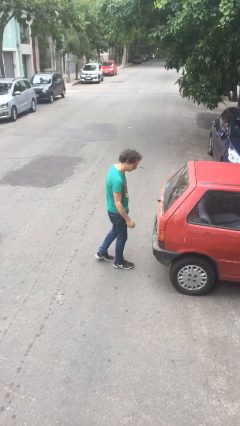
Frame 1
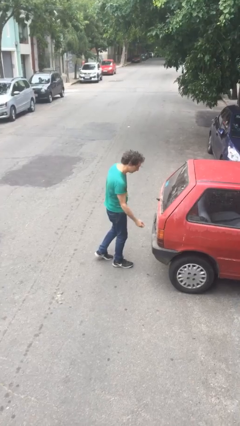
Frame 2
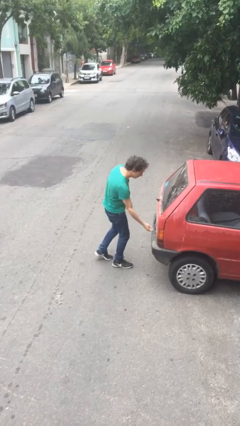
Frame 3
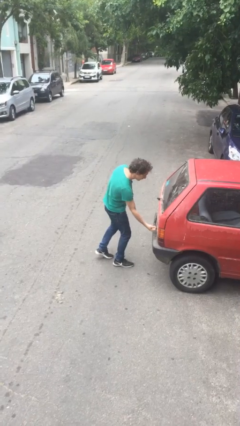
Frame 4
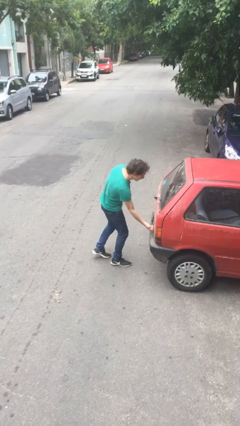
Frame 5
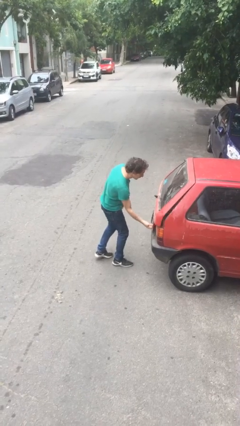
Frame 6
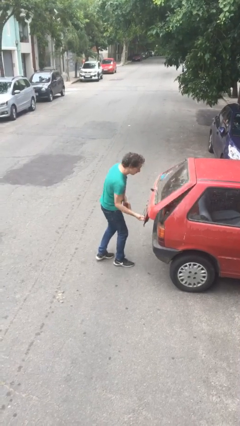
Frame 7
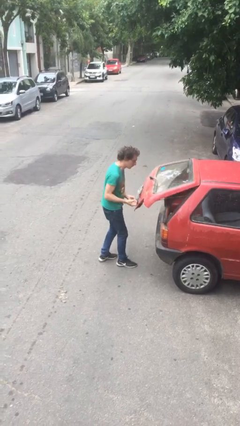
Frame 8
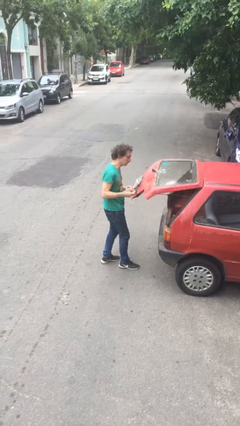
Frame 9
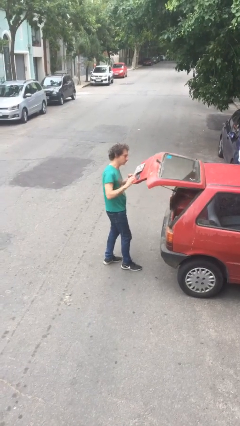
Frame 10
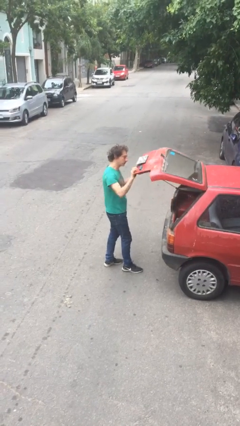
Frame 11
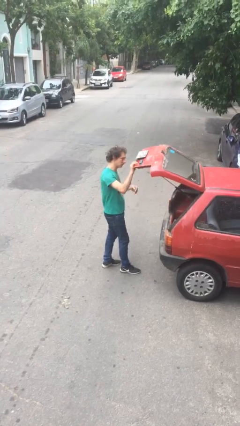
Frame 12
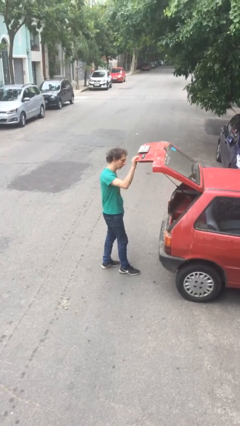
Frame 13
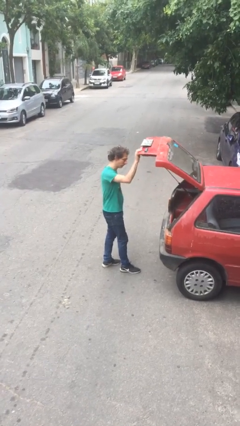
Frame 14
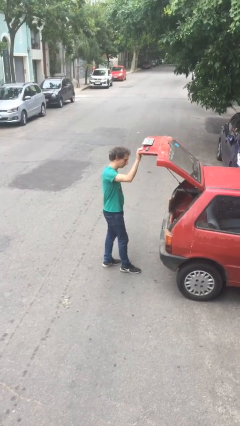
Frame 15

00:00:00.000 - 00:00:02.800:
person opens car trunk

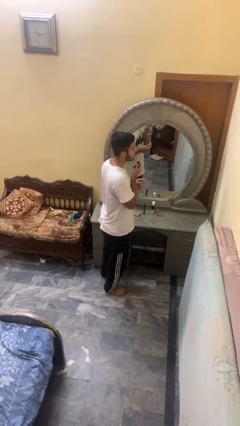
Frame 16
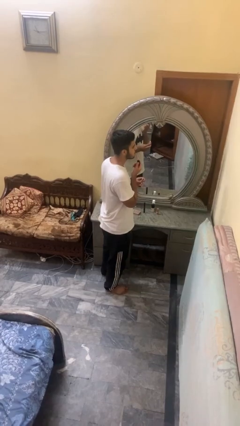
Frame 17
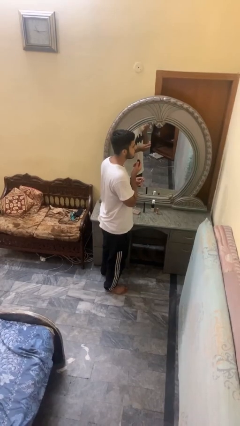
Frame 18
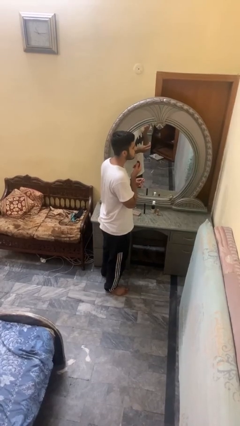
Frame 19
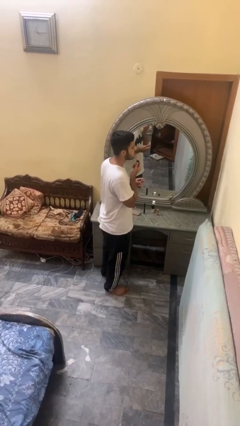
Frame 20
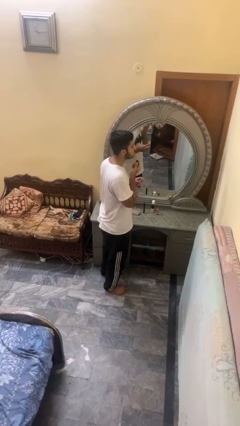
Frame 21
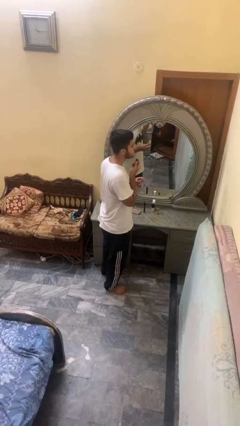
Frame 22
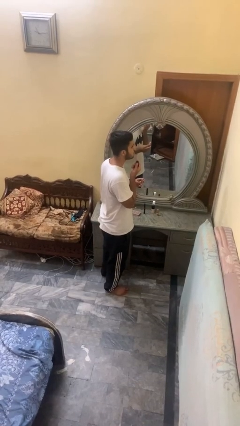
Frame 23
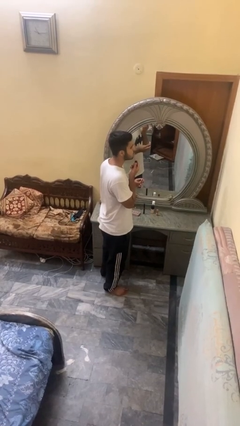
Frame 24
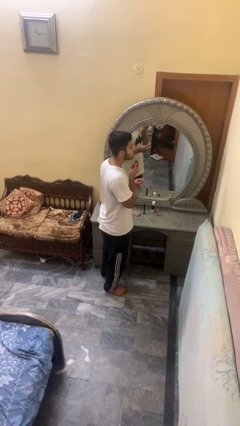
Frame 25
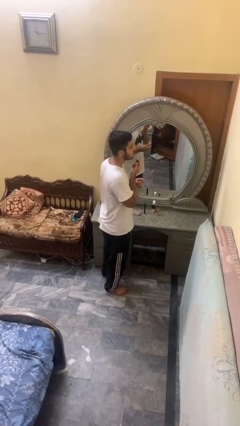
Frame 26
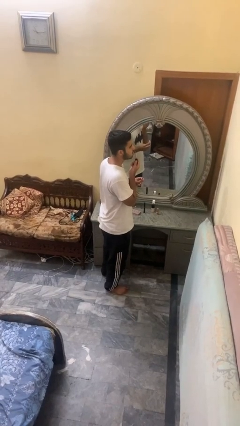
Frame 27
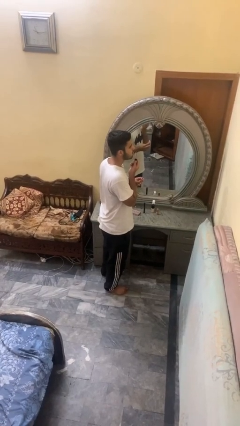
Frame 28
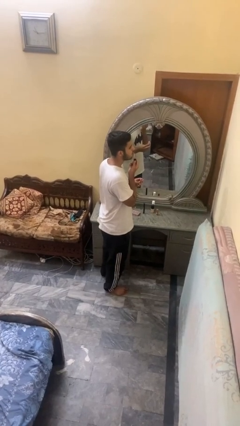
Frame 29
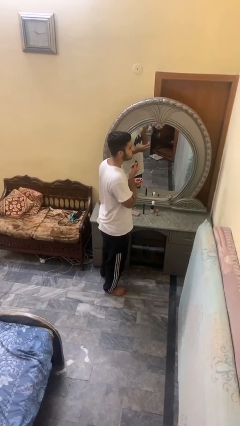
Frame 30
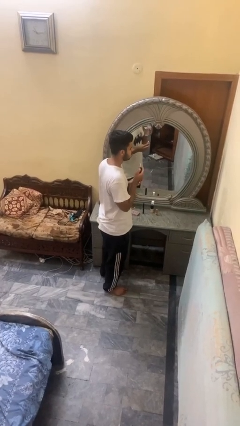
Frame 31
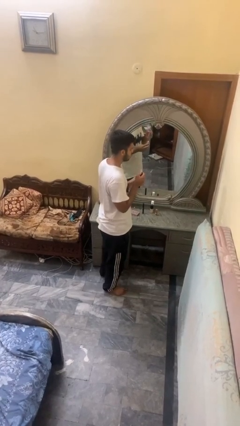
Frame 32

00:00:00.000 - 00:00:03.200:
person applies lip makeup

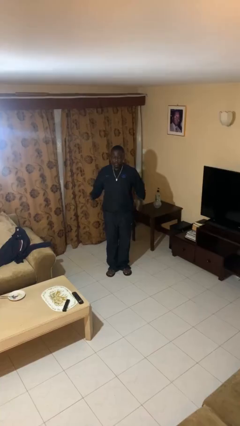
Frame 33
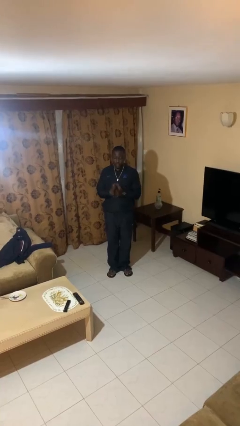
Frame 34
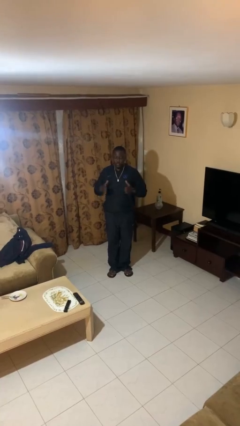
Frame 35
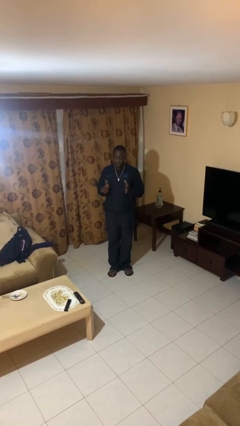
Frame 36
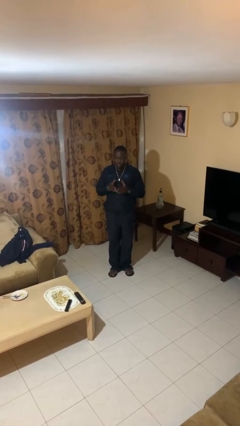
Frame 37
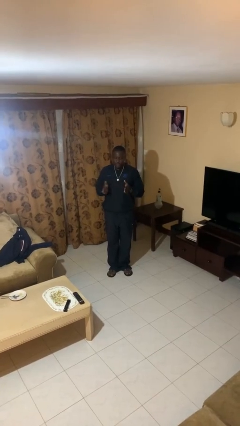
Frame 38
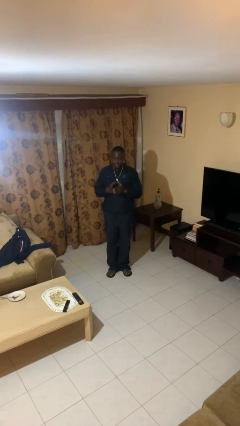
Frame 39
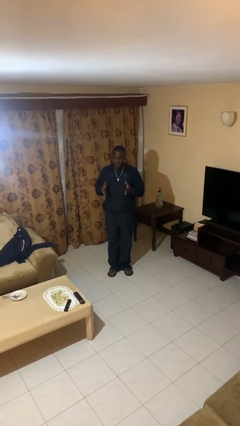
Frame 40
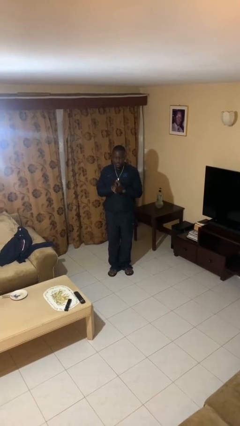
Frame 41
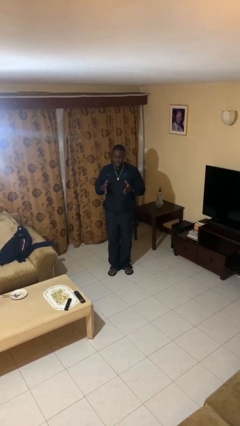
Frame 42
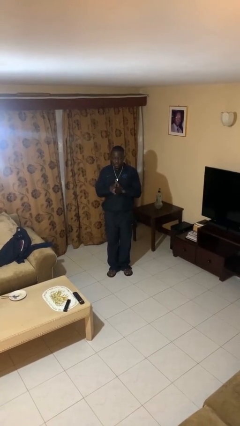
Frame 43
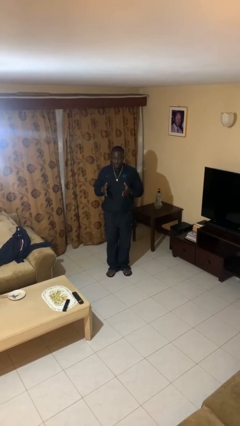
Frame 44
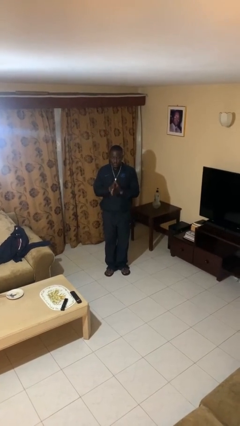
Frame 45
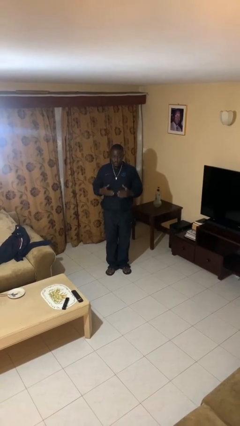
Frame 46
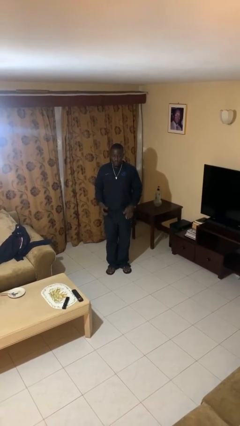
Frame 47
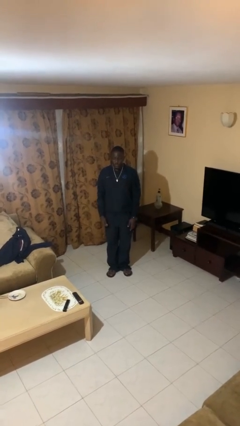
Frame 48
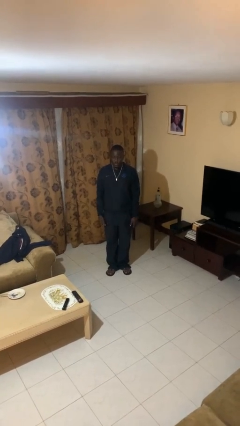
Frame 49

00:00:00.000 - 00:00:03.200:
person claps hands

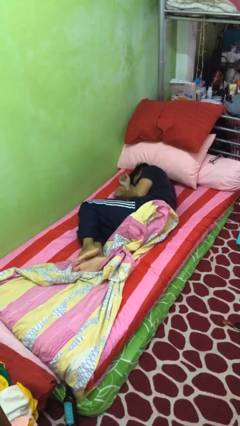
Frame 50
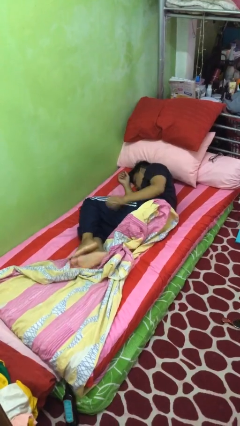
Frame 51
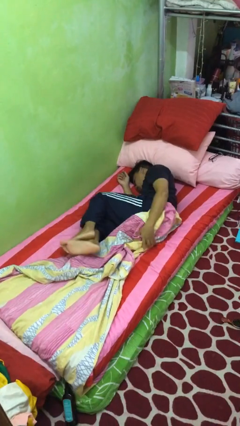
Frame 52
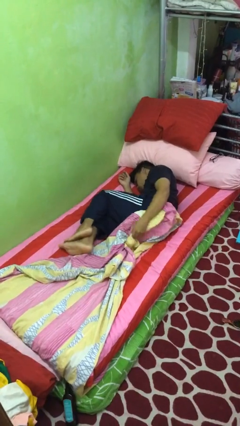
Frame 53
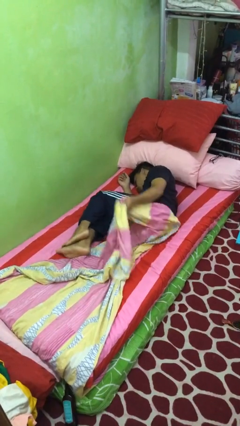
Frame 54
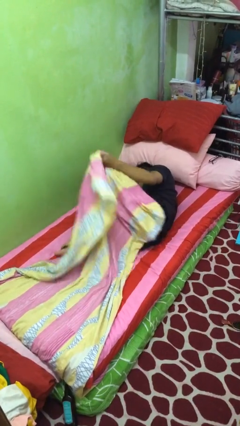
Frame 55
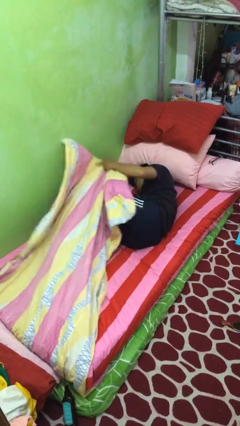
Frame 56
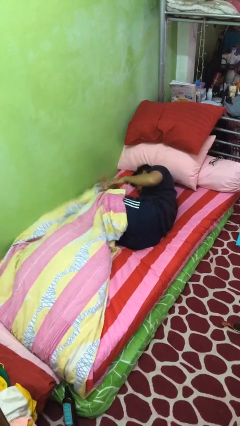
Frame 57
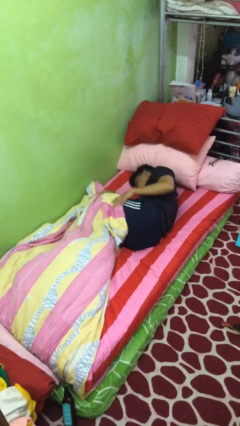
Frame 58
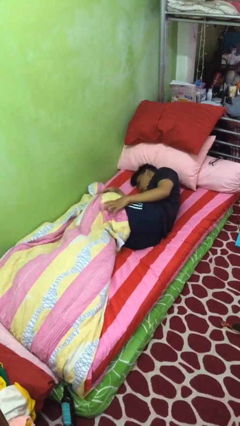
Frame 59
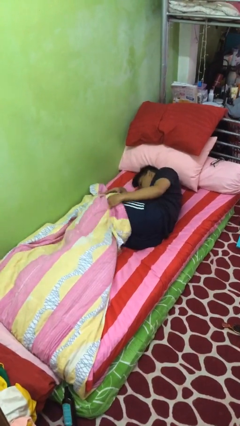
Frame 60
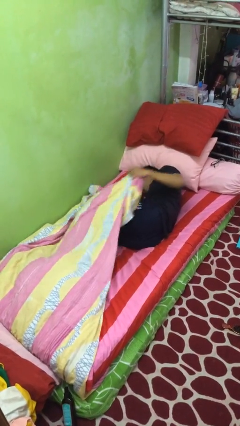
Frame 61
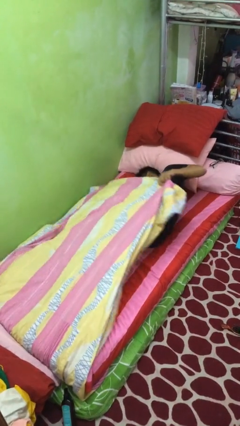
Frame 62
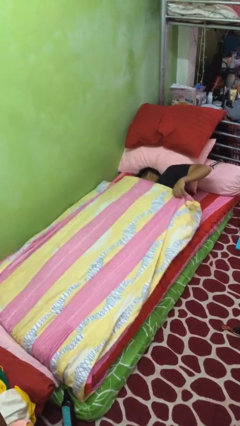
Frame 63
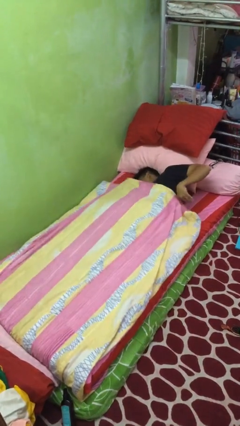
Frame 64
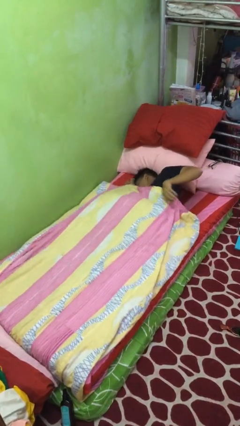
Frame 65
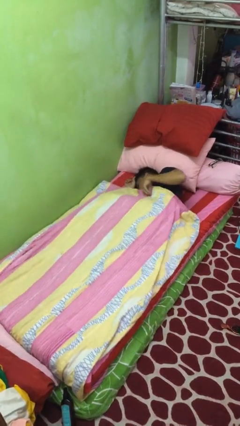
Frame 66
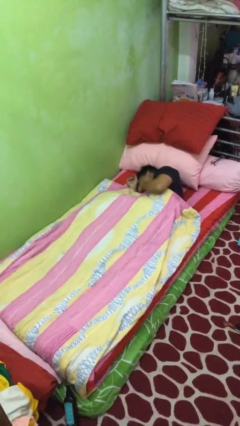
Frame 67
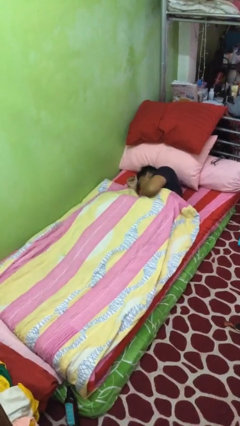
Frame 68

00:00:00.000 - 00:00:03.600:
person covers with bedsheets

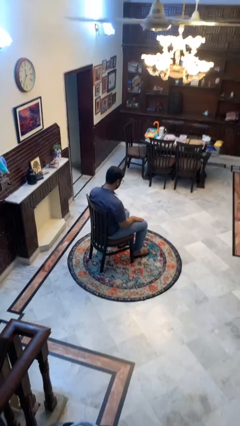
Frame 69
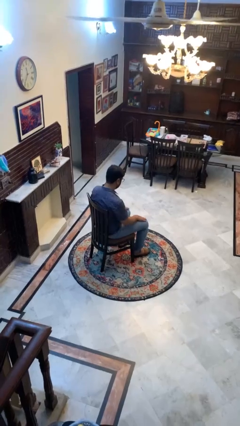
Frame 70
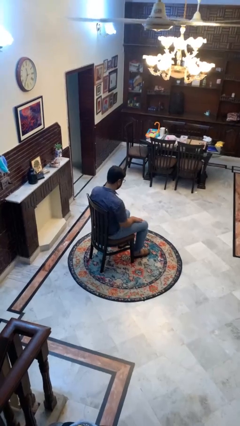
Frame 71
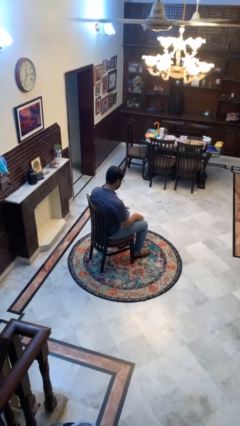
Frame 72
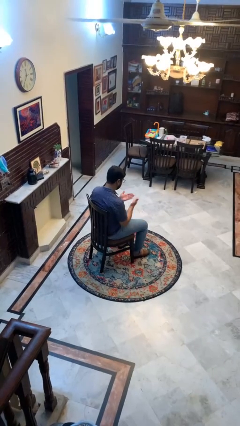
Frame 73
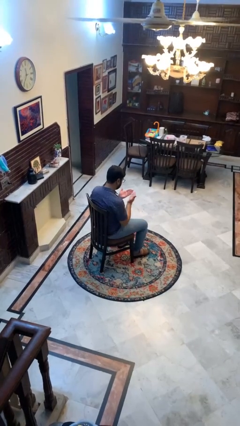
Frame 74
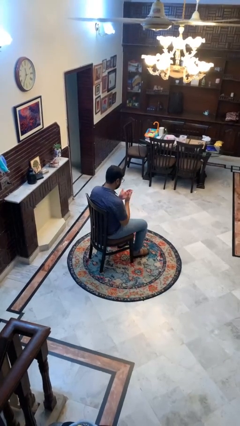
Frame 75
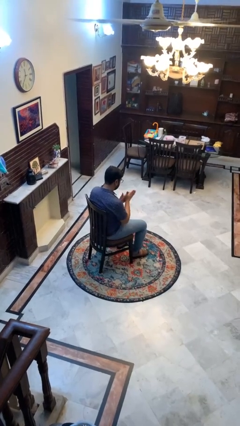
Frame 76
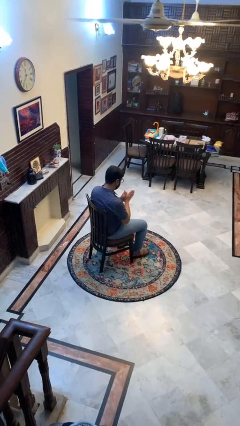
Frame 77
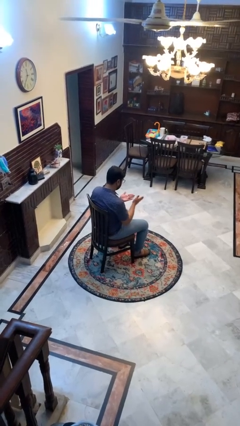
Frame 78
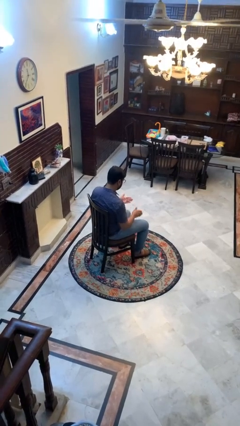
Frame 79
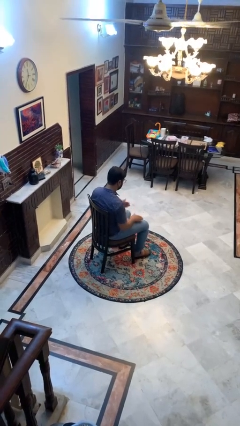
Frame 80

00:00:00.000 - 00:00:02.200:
person looks at hands in lap

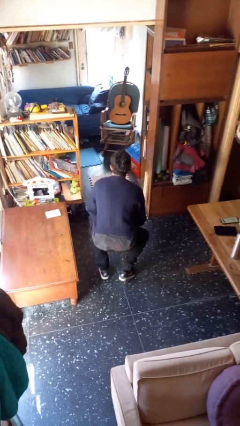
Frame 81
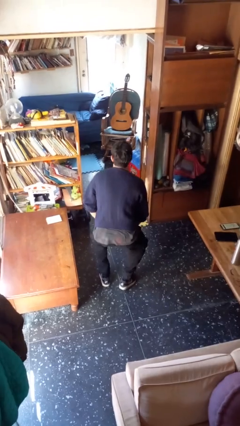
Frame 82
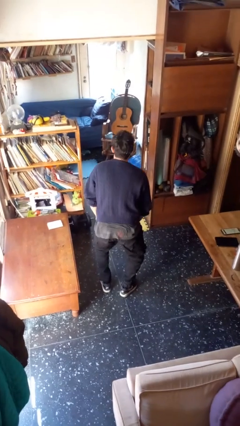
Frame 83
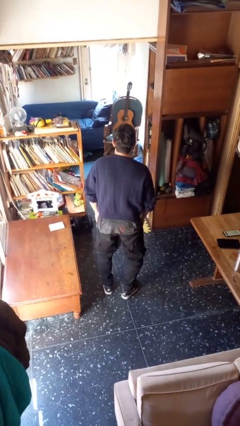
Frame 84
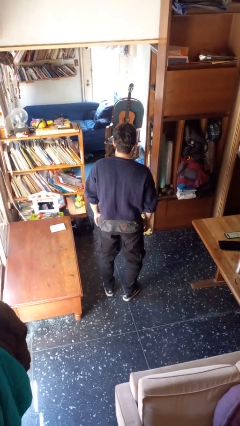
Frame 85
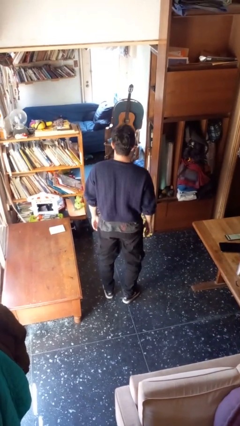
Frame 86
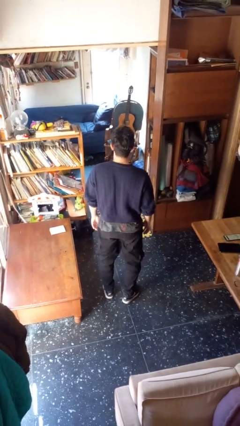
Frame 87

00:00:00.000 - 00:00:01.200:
person stands up

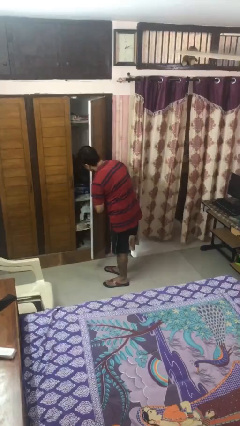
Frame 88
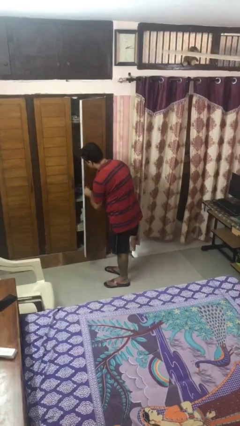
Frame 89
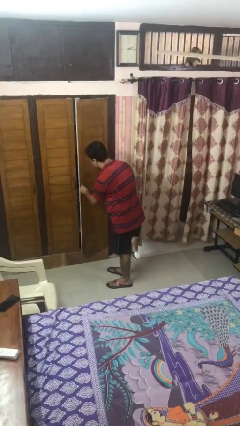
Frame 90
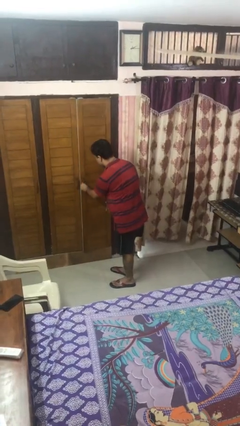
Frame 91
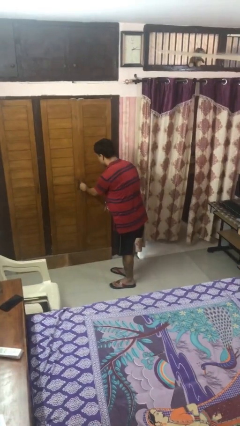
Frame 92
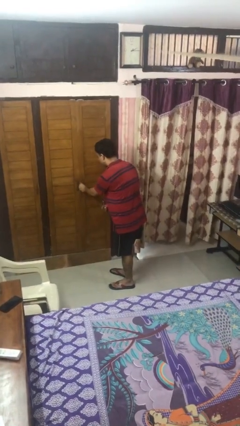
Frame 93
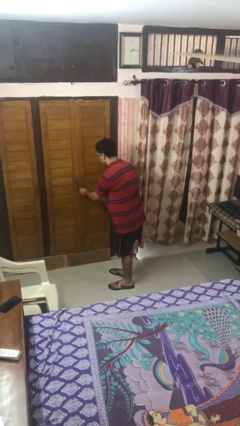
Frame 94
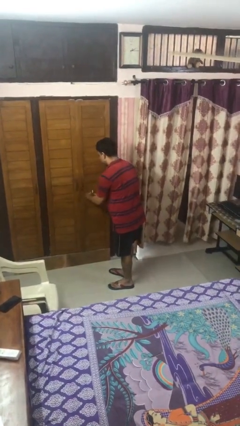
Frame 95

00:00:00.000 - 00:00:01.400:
person closes facility door
